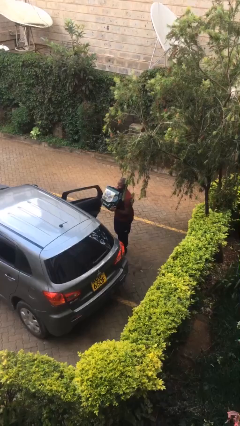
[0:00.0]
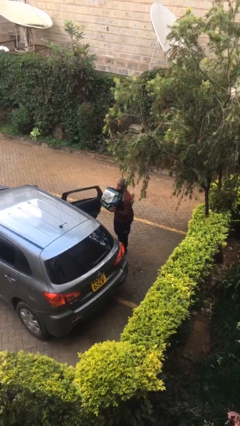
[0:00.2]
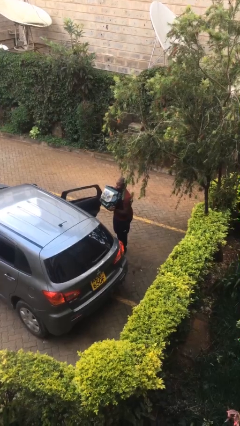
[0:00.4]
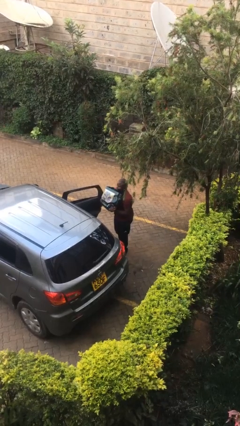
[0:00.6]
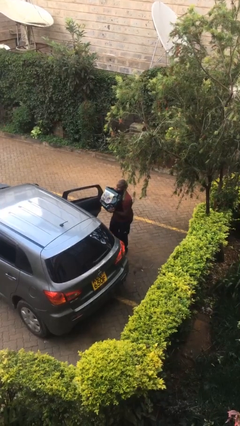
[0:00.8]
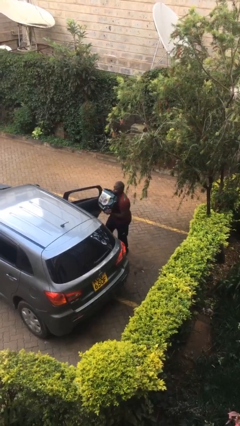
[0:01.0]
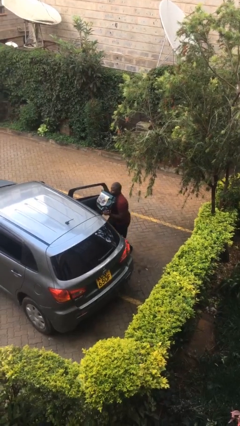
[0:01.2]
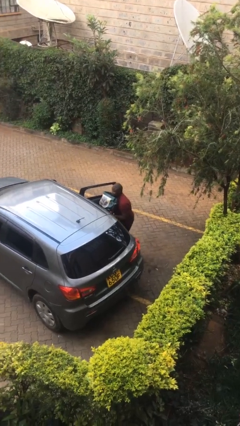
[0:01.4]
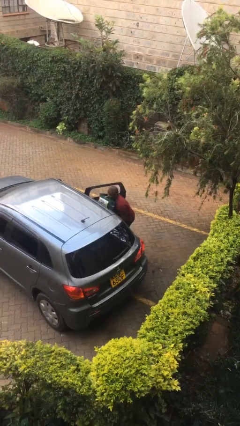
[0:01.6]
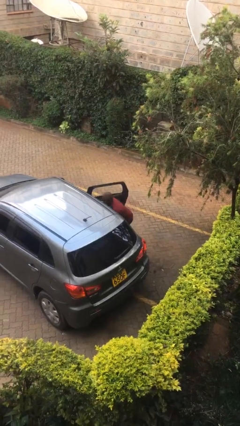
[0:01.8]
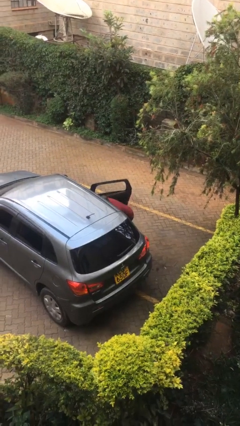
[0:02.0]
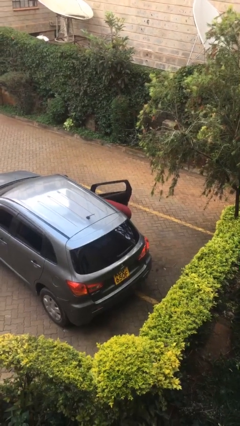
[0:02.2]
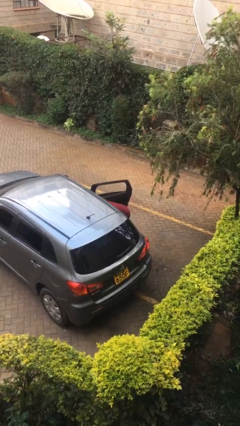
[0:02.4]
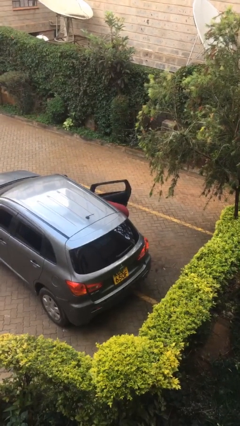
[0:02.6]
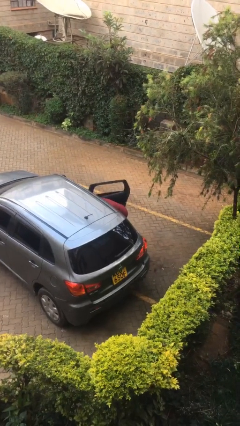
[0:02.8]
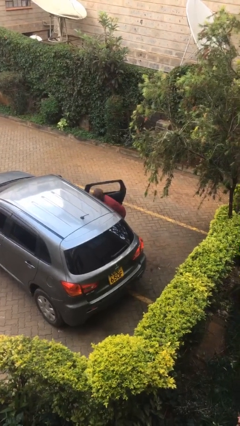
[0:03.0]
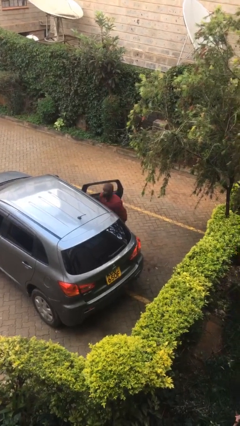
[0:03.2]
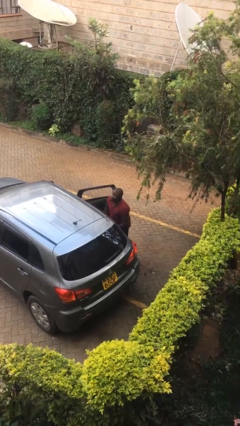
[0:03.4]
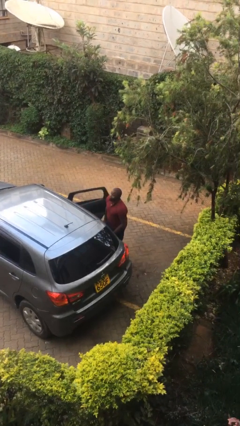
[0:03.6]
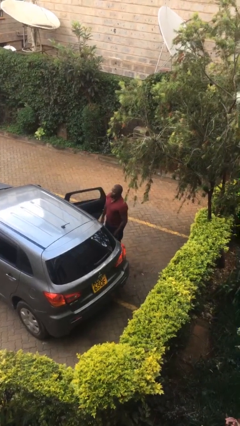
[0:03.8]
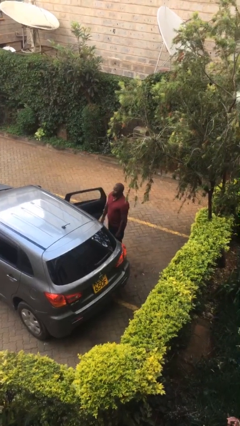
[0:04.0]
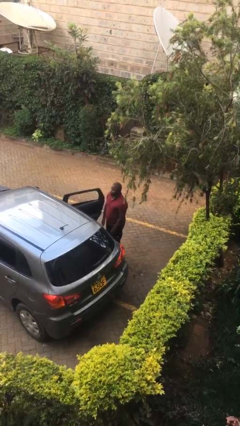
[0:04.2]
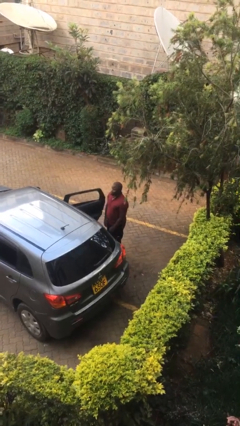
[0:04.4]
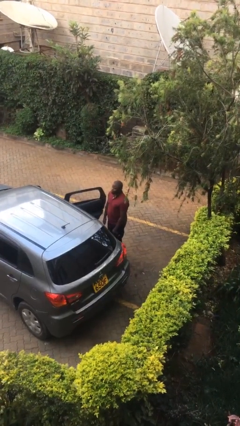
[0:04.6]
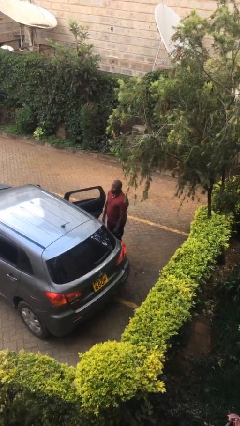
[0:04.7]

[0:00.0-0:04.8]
person loads car

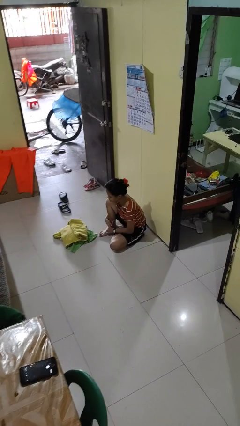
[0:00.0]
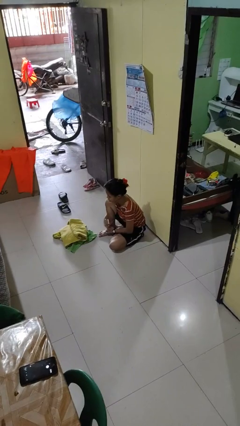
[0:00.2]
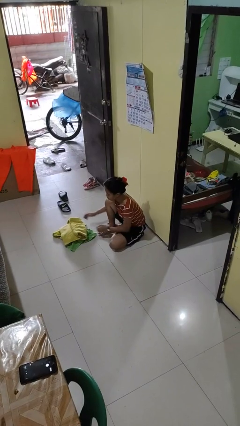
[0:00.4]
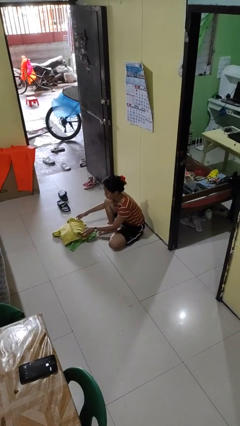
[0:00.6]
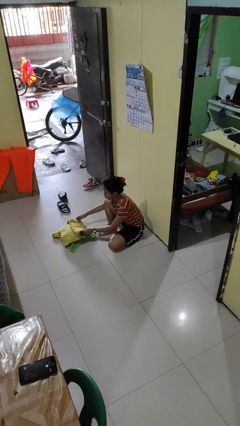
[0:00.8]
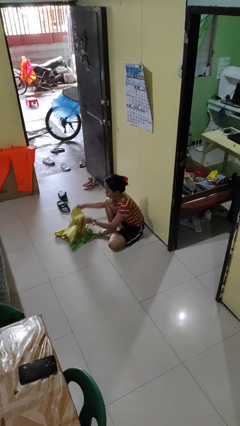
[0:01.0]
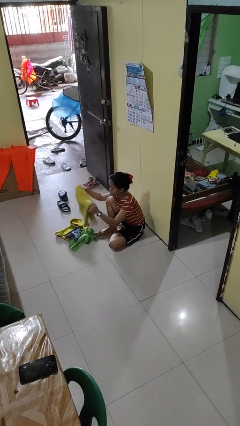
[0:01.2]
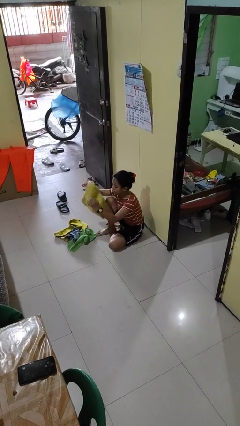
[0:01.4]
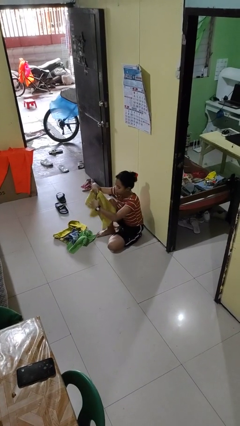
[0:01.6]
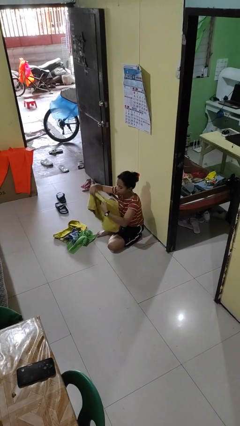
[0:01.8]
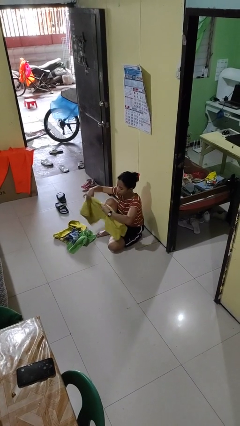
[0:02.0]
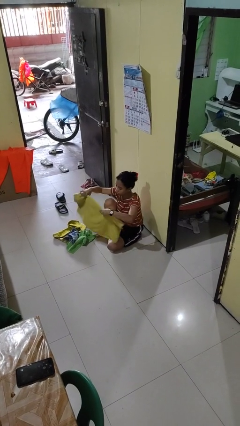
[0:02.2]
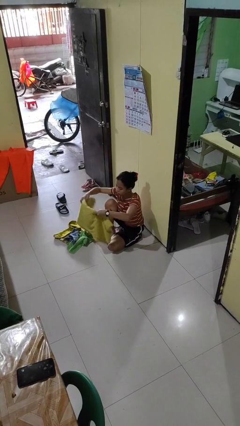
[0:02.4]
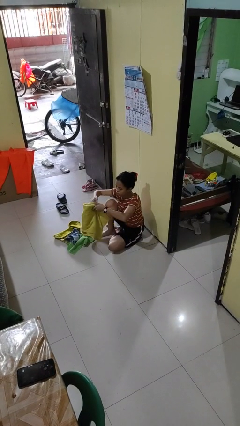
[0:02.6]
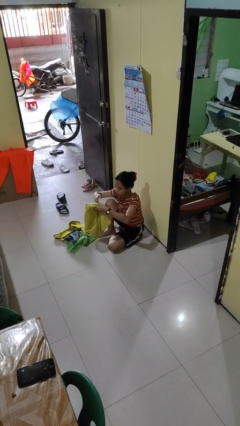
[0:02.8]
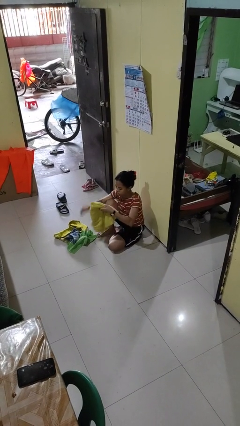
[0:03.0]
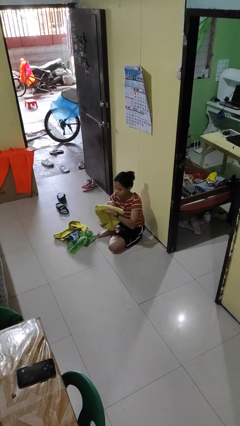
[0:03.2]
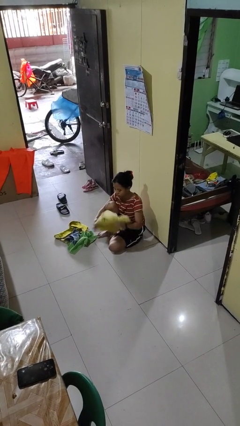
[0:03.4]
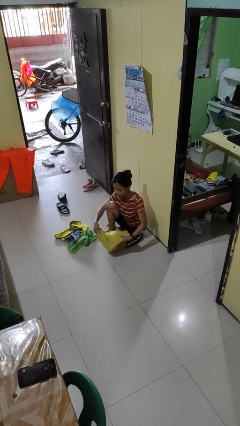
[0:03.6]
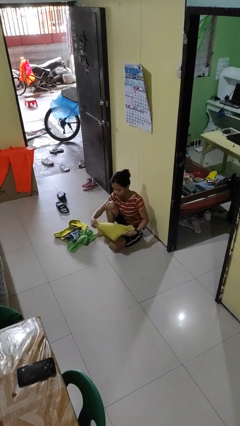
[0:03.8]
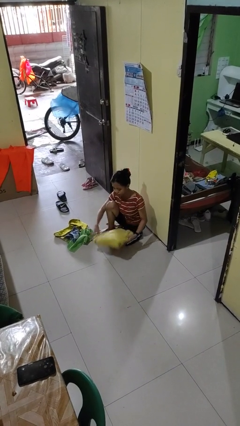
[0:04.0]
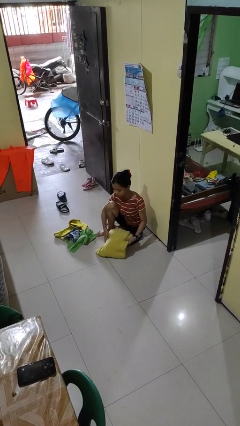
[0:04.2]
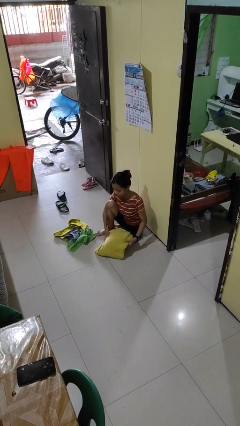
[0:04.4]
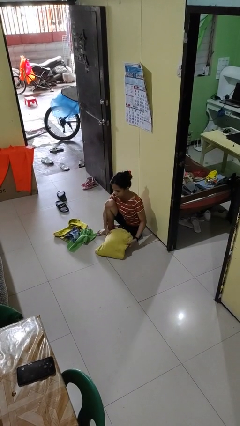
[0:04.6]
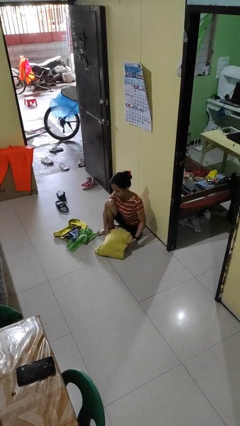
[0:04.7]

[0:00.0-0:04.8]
person folds towel

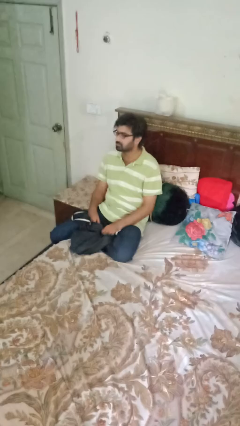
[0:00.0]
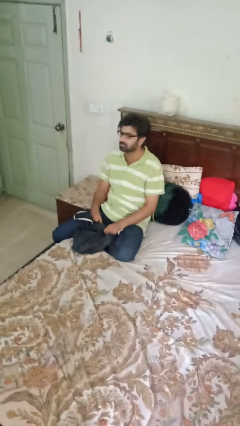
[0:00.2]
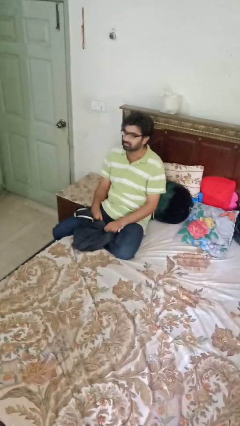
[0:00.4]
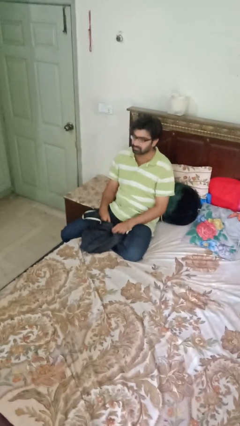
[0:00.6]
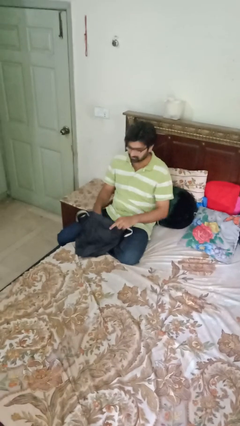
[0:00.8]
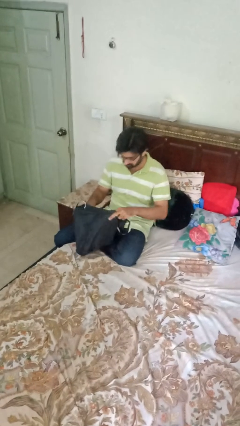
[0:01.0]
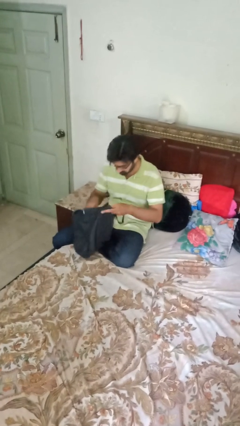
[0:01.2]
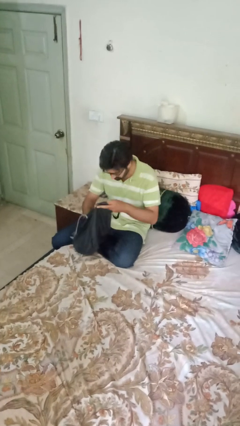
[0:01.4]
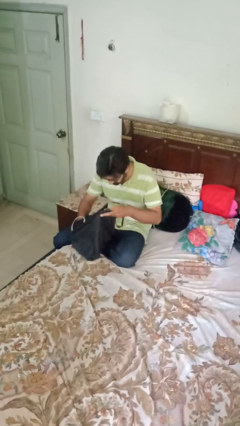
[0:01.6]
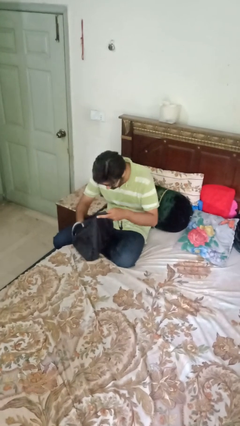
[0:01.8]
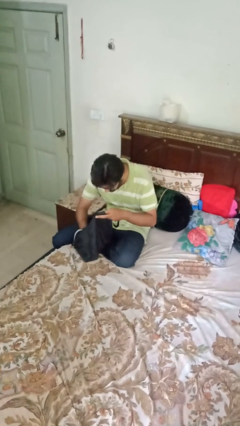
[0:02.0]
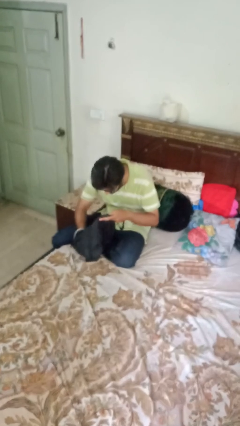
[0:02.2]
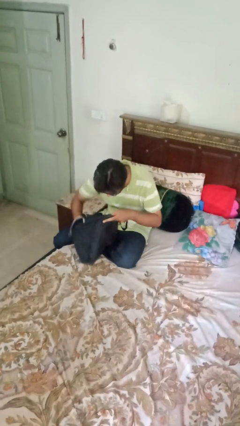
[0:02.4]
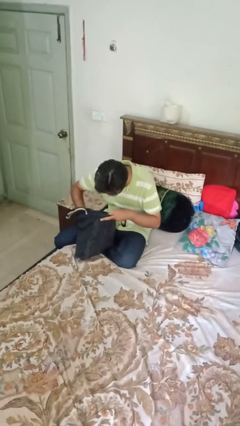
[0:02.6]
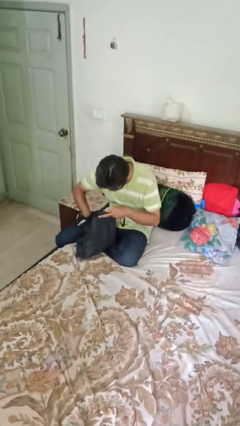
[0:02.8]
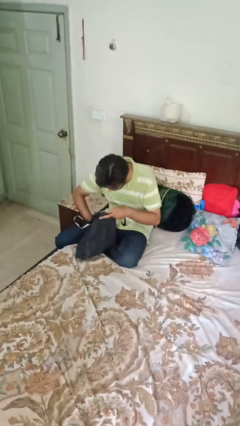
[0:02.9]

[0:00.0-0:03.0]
person searches in bag

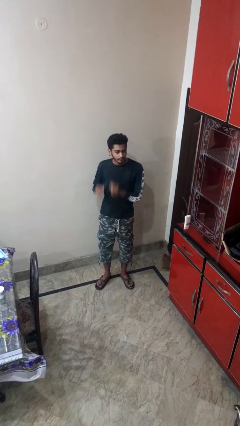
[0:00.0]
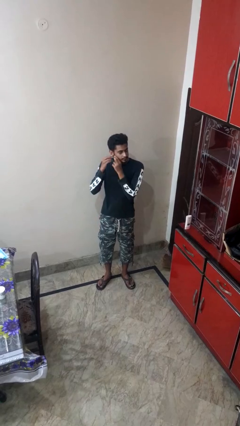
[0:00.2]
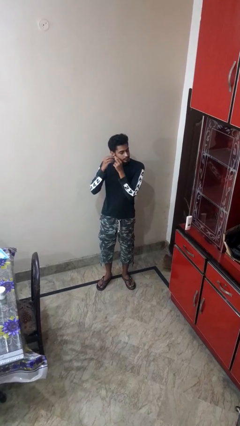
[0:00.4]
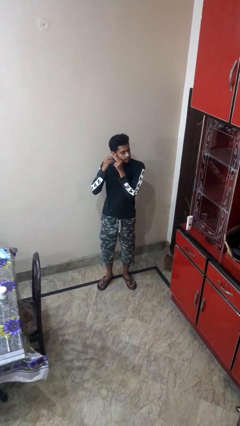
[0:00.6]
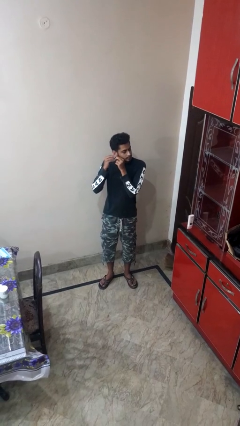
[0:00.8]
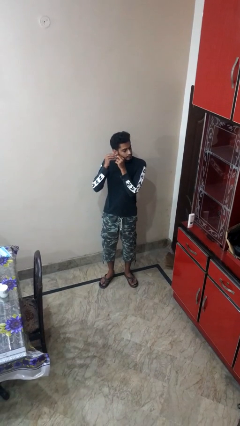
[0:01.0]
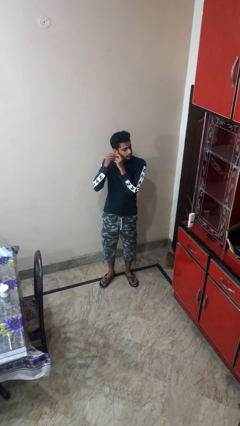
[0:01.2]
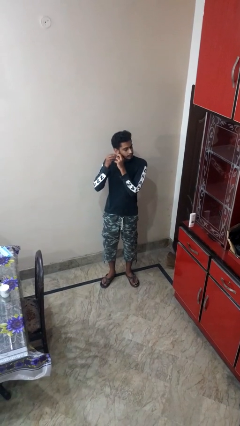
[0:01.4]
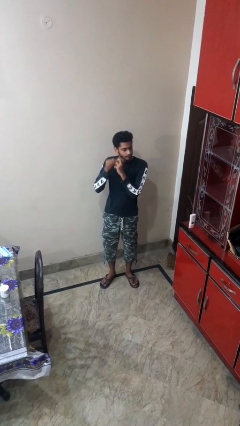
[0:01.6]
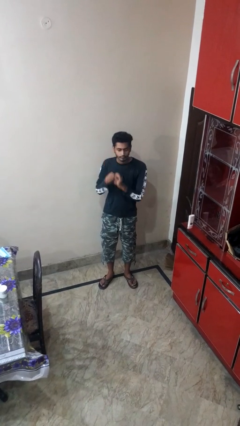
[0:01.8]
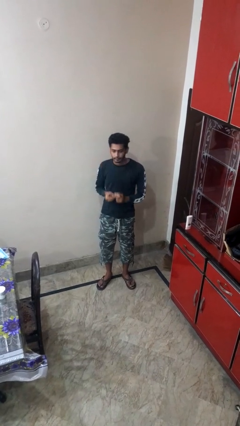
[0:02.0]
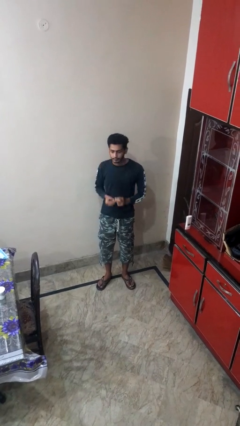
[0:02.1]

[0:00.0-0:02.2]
person takes off earrings

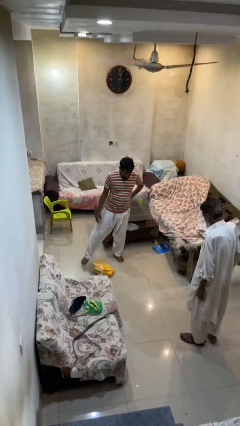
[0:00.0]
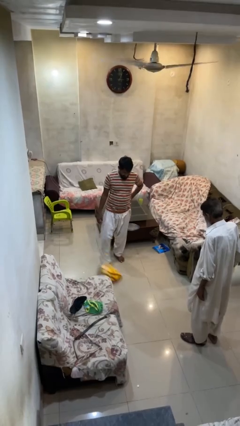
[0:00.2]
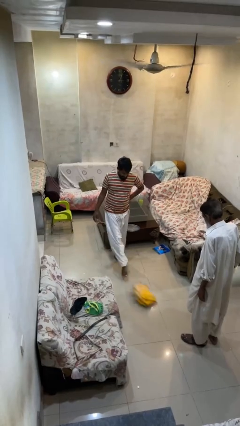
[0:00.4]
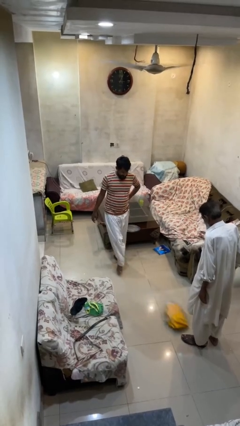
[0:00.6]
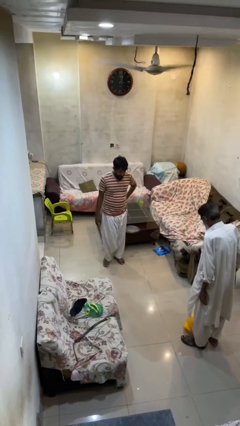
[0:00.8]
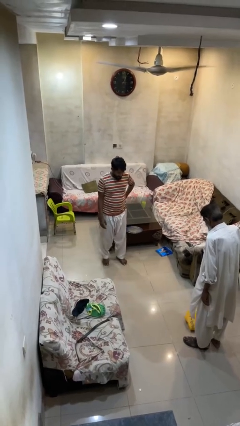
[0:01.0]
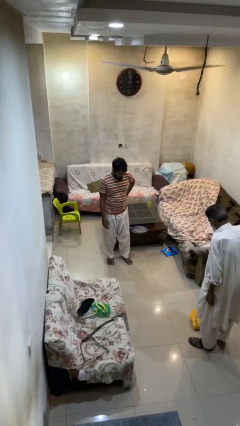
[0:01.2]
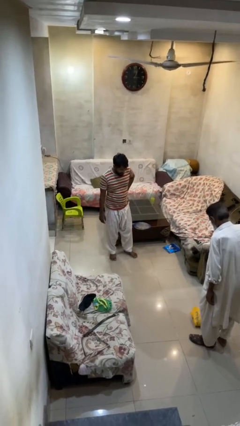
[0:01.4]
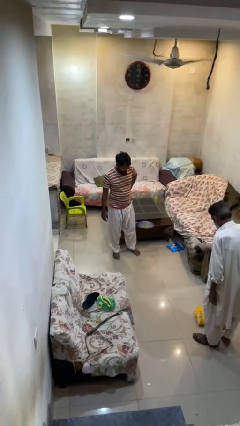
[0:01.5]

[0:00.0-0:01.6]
person kicks object to person

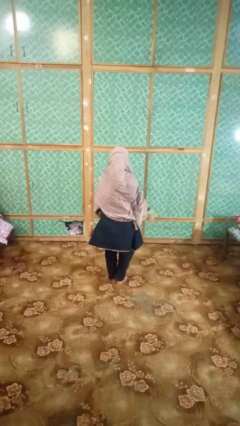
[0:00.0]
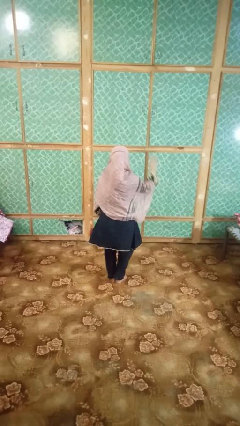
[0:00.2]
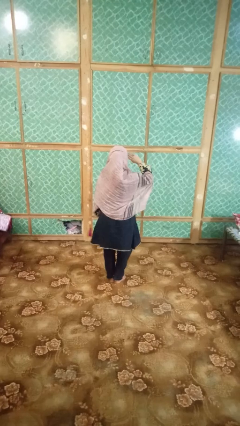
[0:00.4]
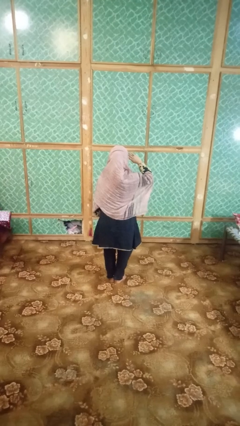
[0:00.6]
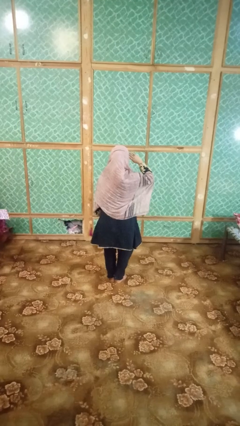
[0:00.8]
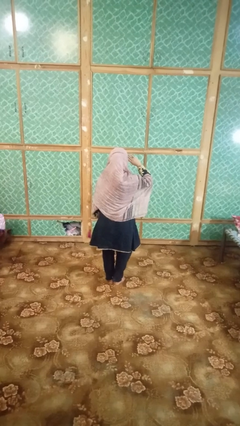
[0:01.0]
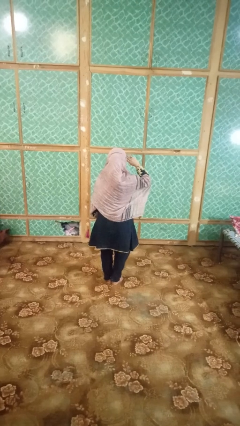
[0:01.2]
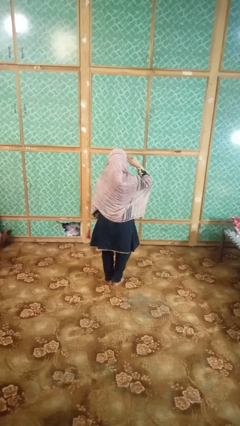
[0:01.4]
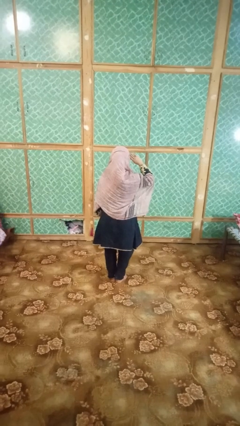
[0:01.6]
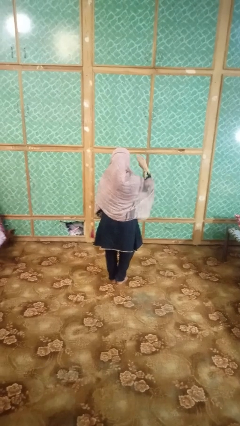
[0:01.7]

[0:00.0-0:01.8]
person salutes
